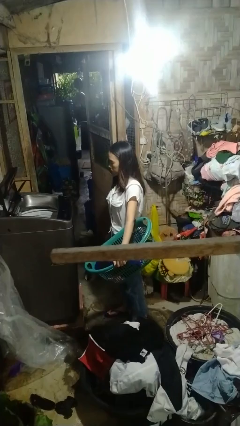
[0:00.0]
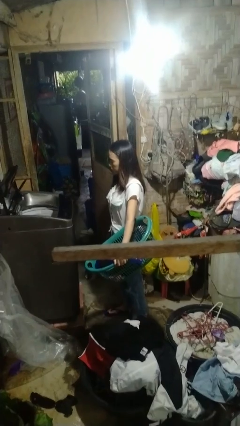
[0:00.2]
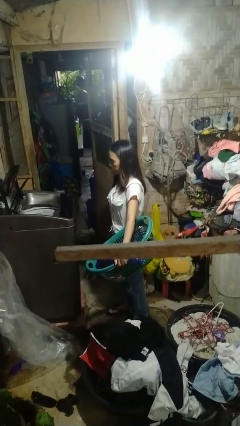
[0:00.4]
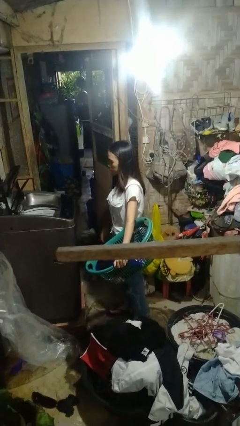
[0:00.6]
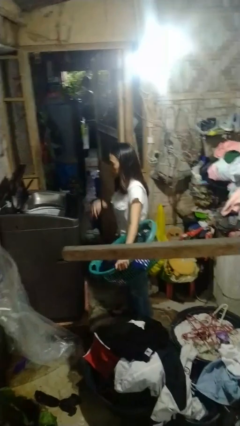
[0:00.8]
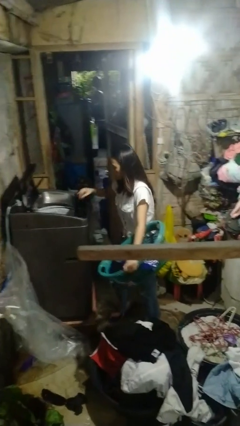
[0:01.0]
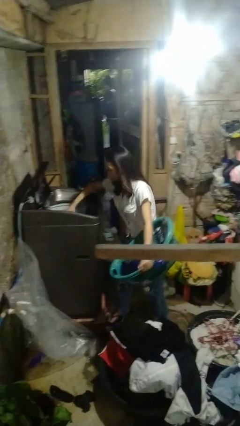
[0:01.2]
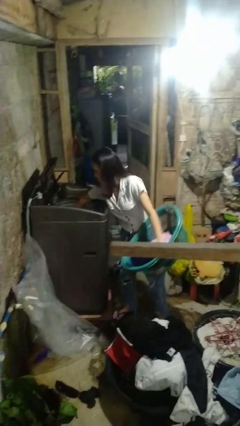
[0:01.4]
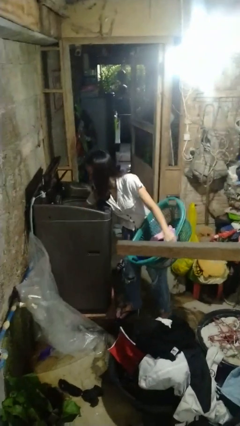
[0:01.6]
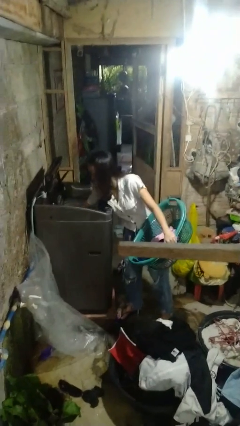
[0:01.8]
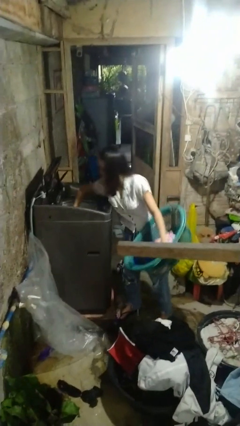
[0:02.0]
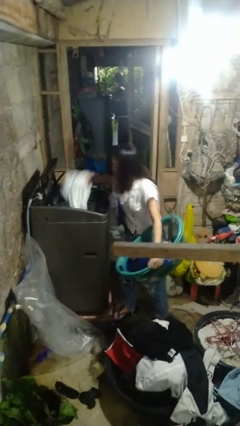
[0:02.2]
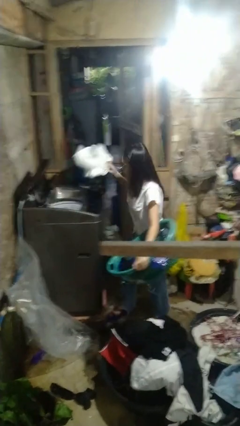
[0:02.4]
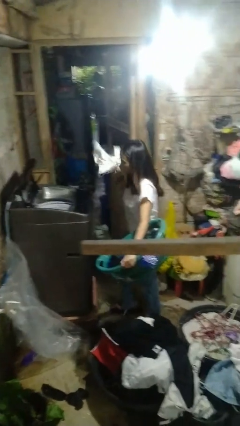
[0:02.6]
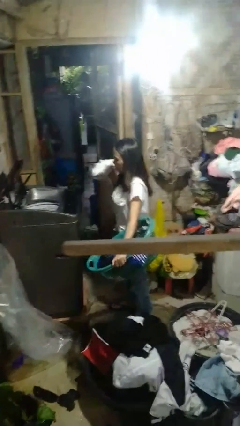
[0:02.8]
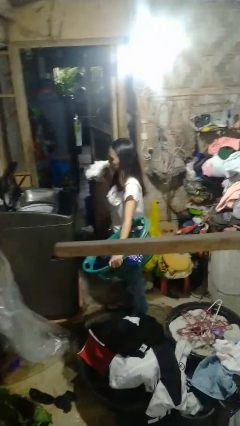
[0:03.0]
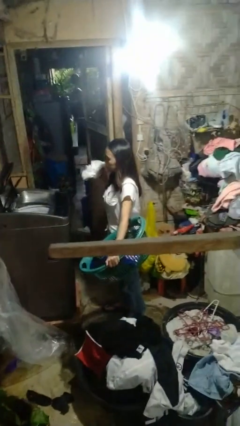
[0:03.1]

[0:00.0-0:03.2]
person unloads dryer

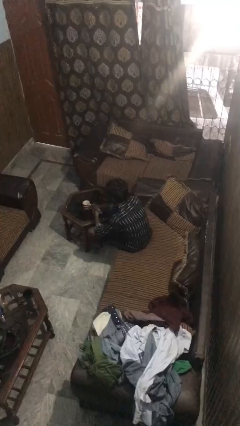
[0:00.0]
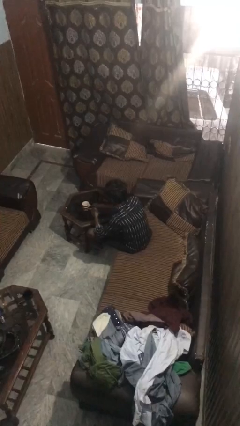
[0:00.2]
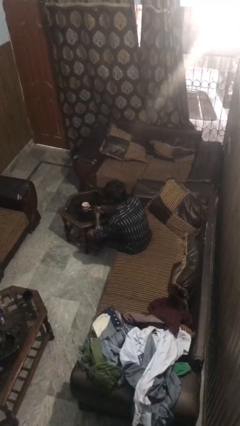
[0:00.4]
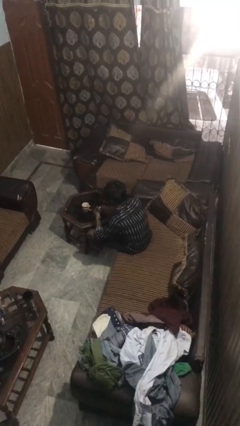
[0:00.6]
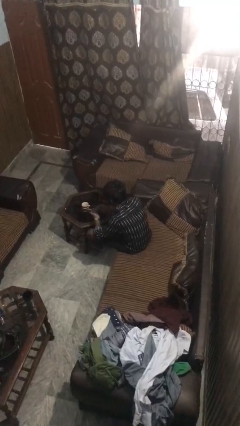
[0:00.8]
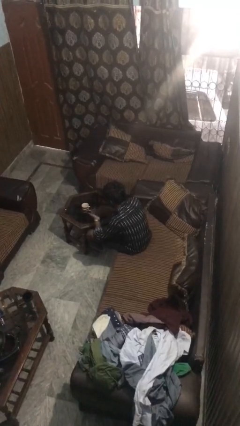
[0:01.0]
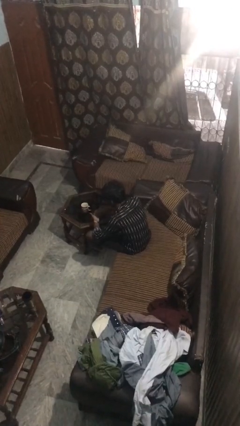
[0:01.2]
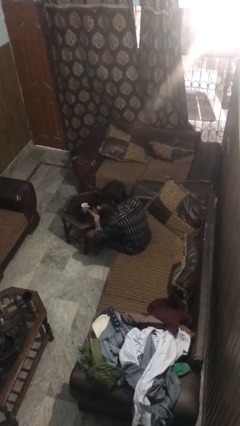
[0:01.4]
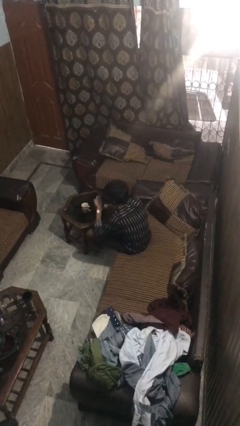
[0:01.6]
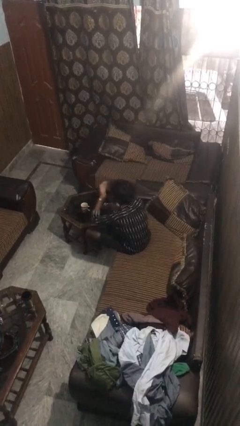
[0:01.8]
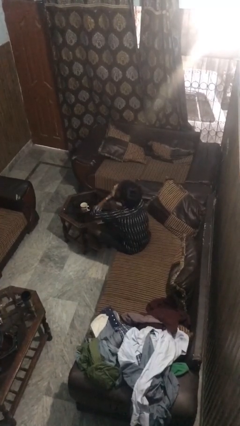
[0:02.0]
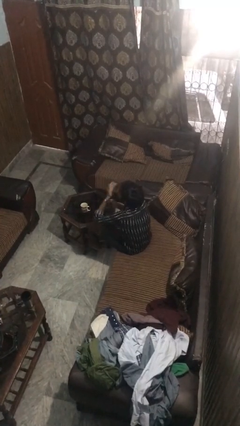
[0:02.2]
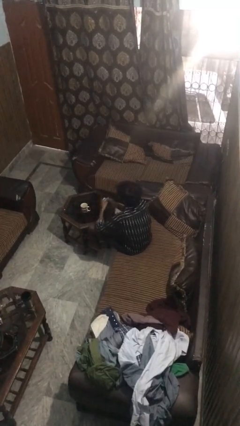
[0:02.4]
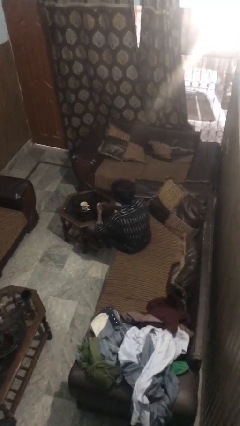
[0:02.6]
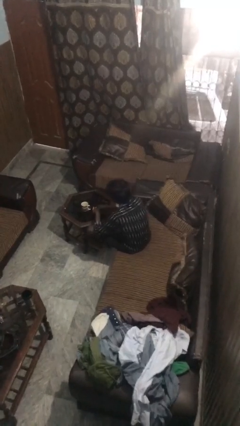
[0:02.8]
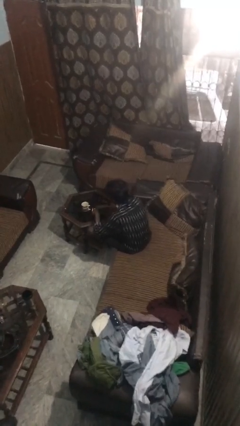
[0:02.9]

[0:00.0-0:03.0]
person takes medicine pills

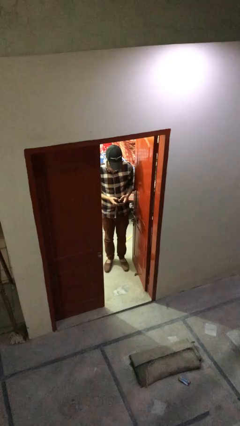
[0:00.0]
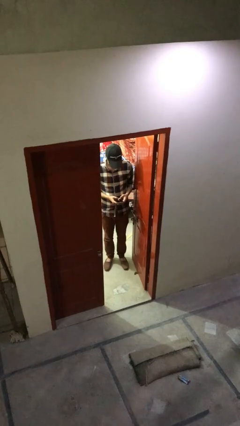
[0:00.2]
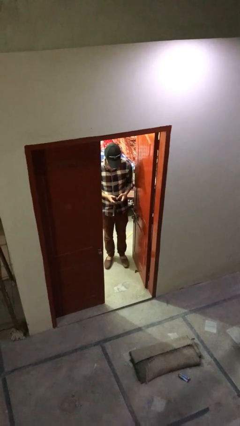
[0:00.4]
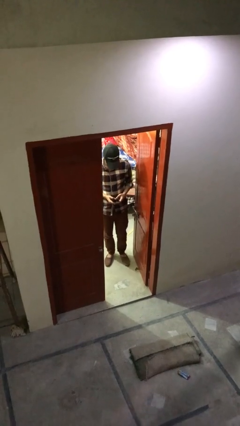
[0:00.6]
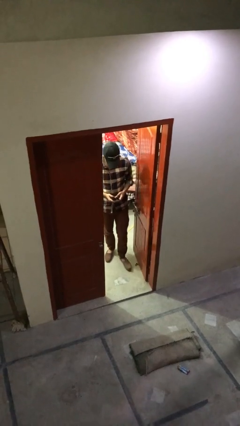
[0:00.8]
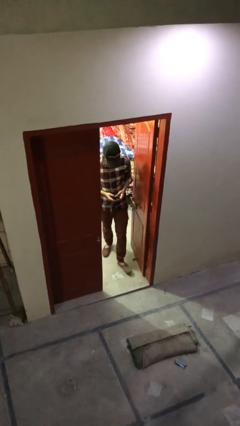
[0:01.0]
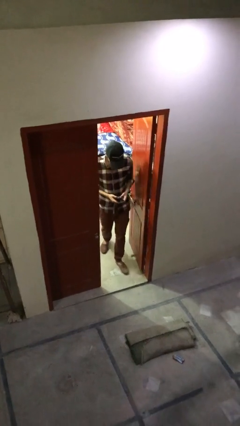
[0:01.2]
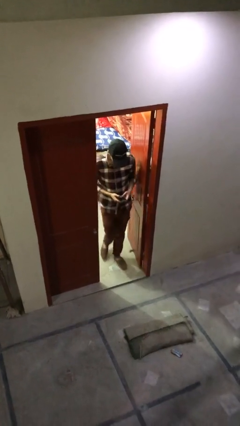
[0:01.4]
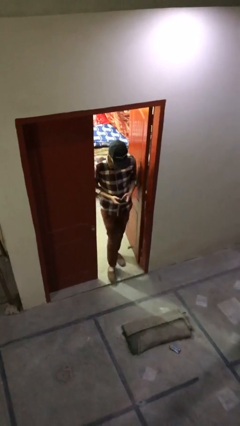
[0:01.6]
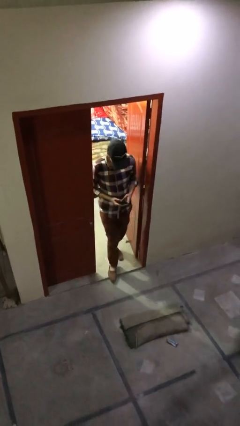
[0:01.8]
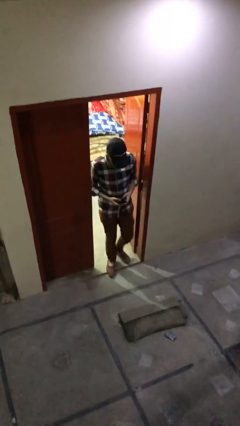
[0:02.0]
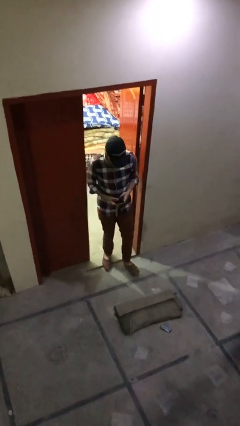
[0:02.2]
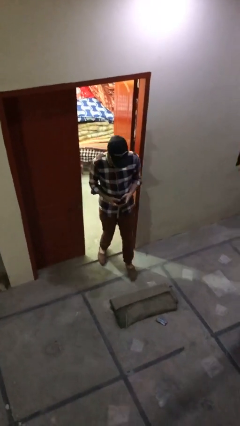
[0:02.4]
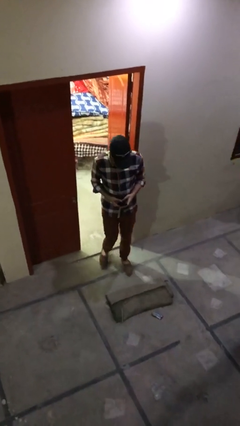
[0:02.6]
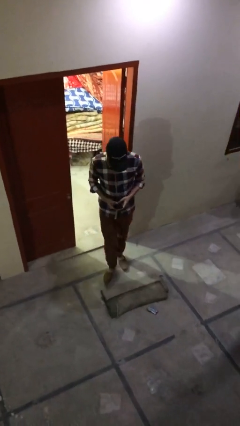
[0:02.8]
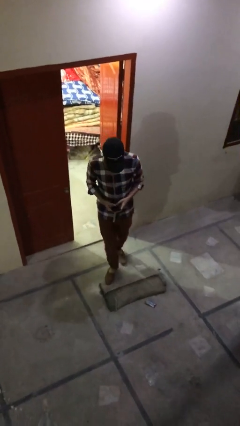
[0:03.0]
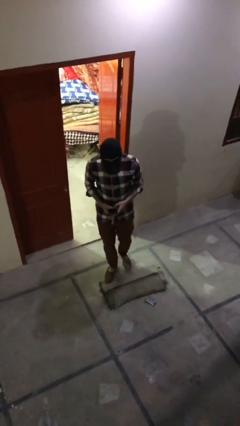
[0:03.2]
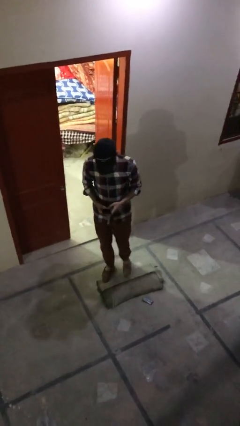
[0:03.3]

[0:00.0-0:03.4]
person enters scene through structure

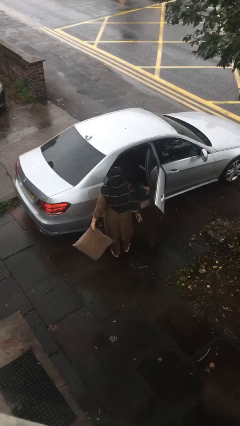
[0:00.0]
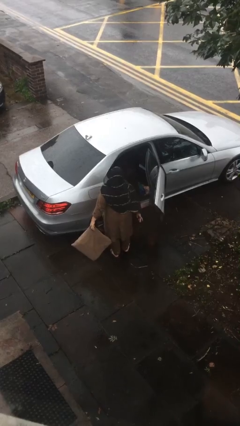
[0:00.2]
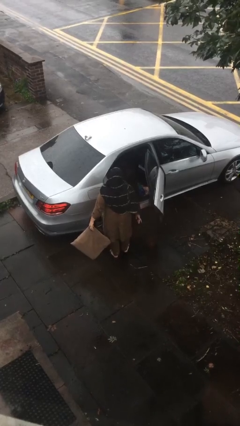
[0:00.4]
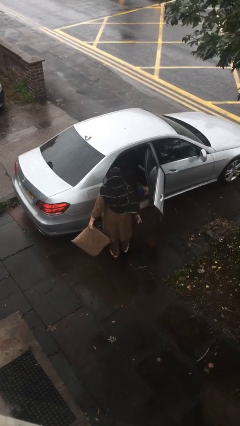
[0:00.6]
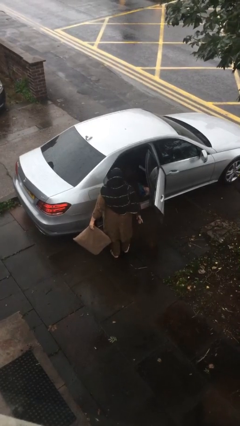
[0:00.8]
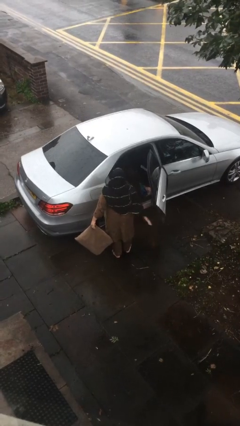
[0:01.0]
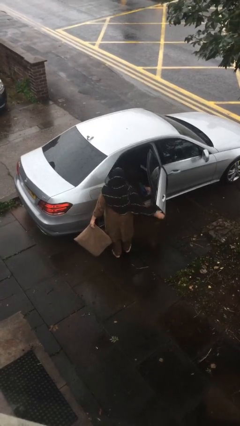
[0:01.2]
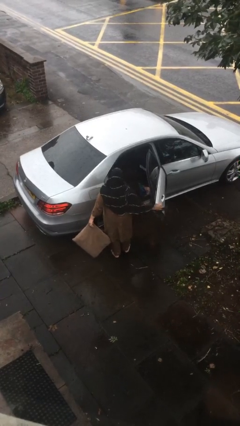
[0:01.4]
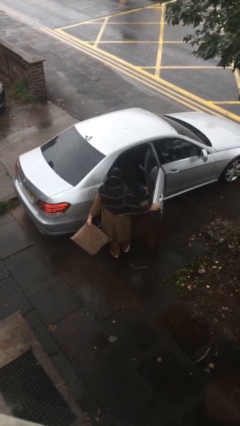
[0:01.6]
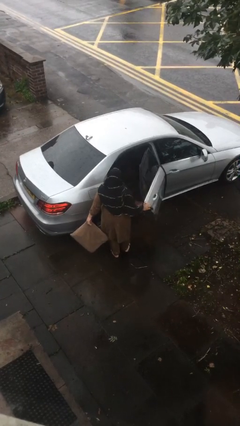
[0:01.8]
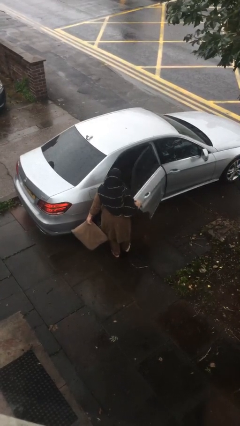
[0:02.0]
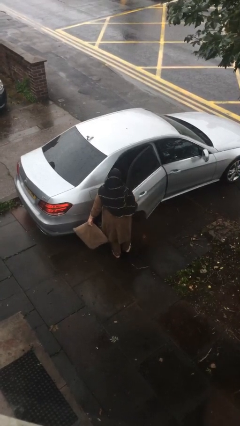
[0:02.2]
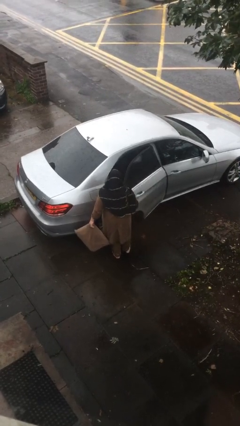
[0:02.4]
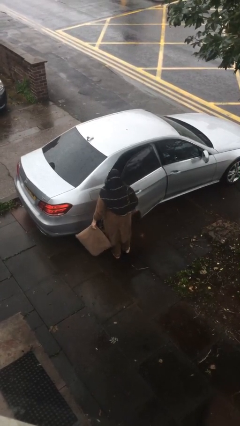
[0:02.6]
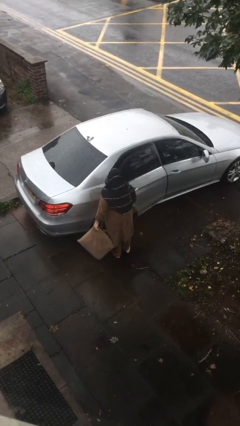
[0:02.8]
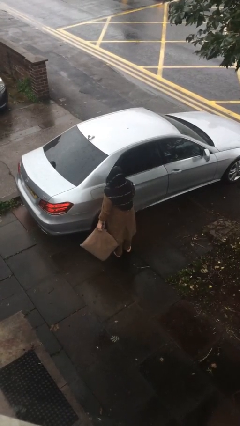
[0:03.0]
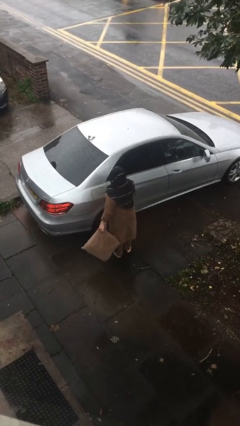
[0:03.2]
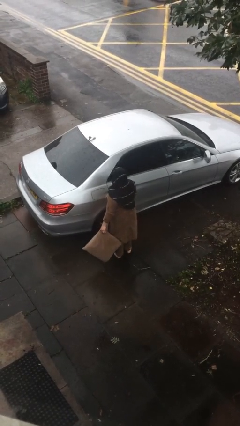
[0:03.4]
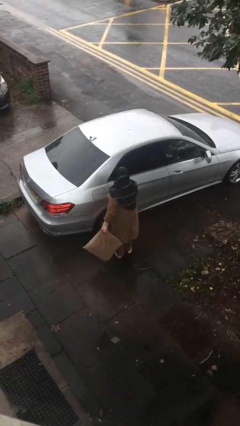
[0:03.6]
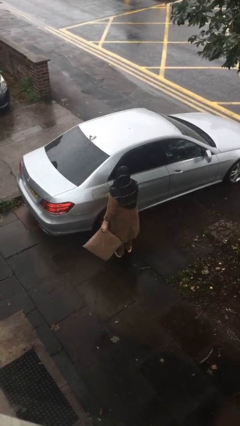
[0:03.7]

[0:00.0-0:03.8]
person closes car door

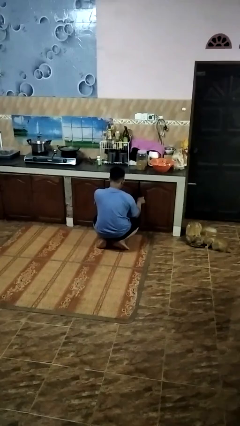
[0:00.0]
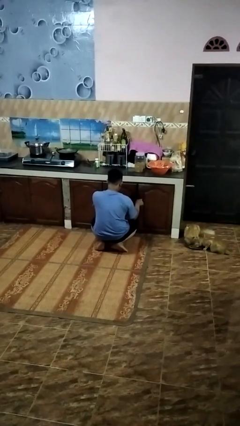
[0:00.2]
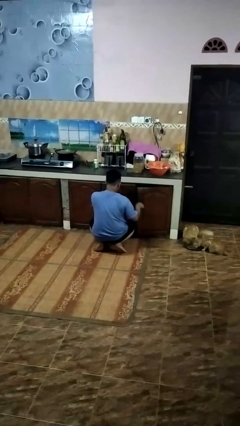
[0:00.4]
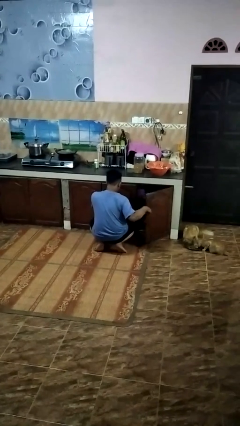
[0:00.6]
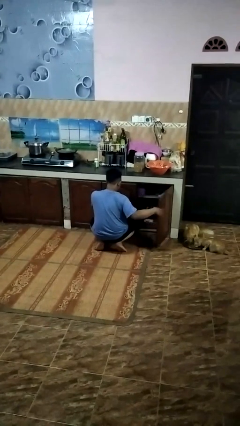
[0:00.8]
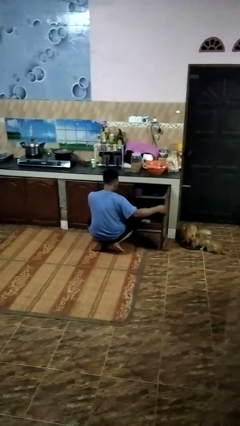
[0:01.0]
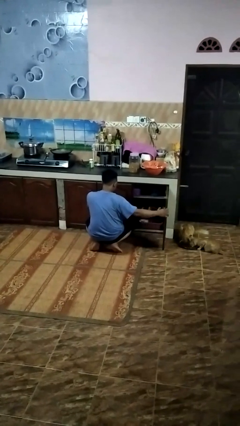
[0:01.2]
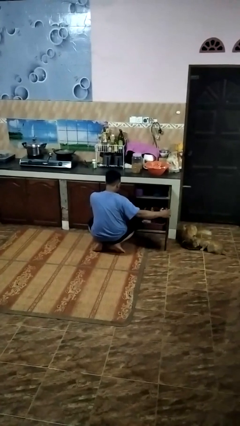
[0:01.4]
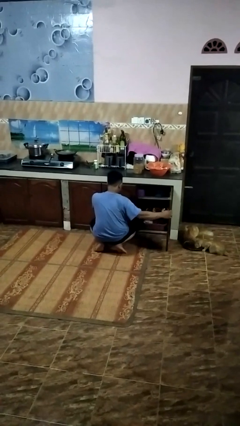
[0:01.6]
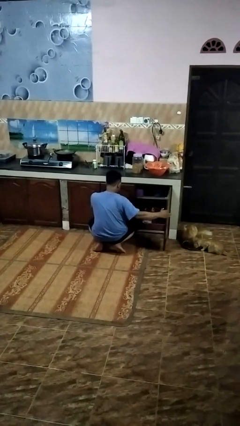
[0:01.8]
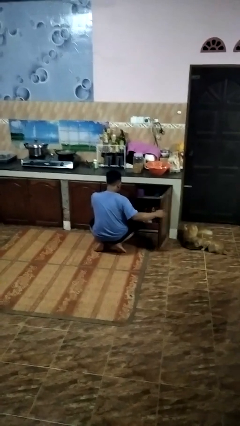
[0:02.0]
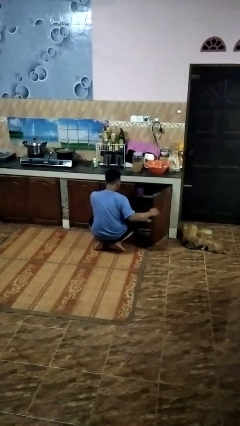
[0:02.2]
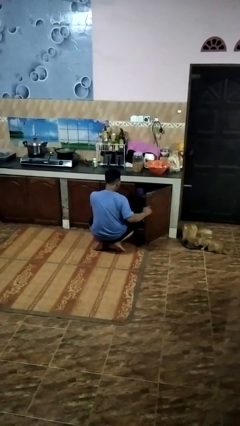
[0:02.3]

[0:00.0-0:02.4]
person opens kitchen drawer

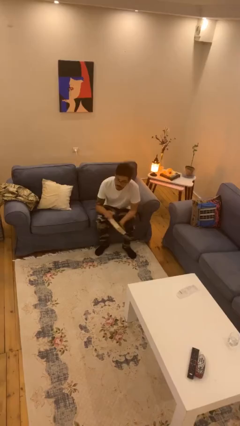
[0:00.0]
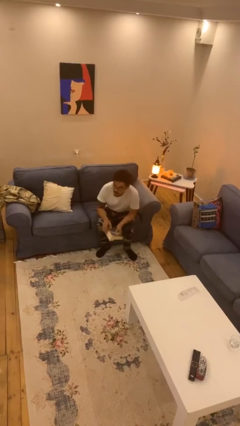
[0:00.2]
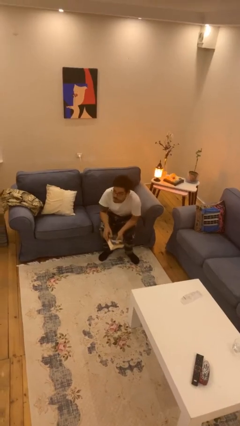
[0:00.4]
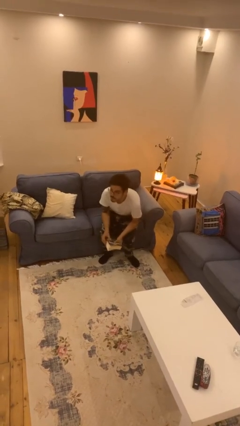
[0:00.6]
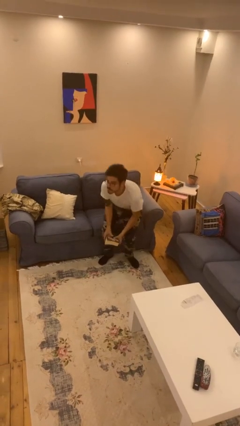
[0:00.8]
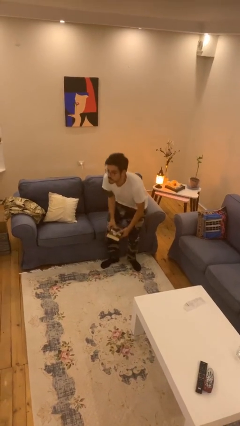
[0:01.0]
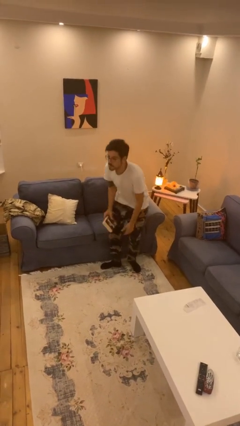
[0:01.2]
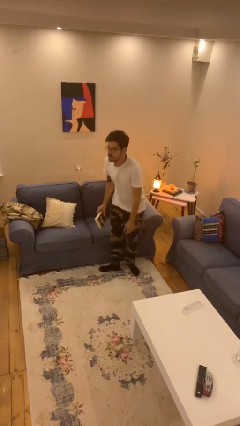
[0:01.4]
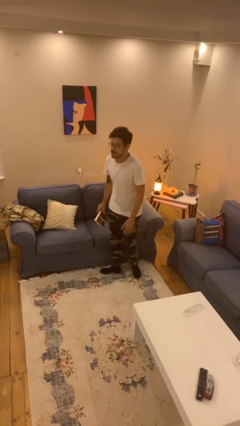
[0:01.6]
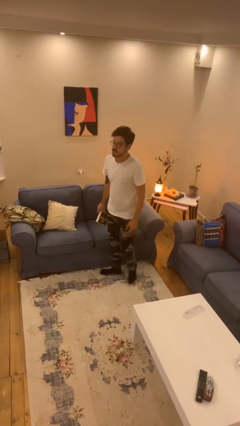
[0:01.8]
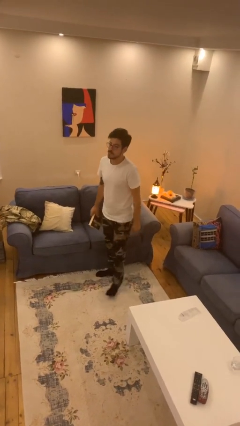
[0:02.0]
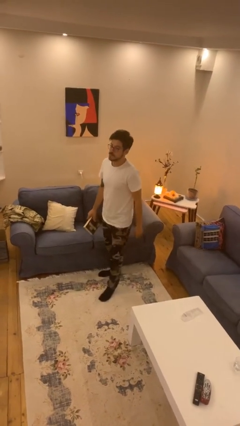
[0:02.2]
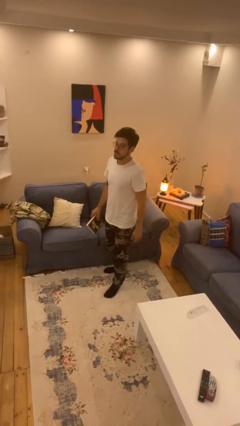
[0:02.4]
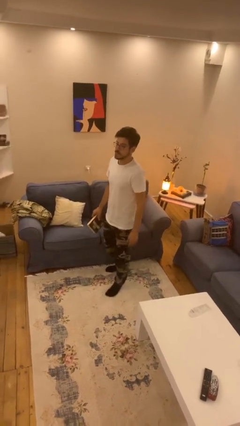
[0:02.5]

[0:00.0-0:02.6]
person stands up
